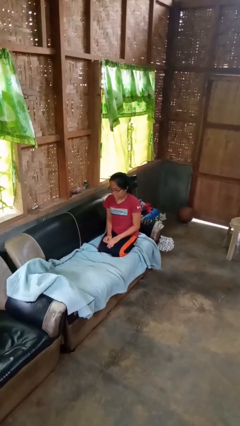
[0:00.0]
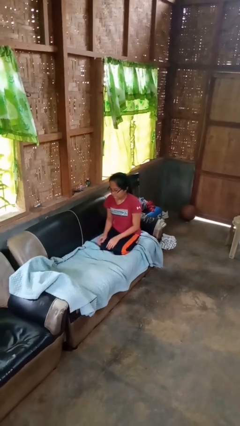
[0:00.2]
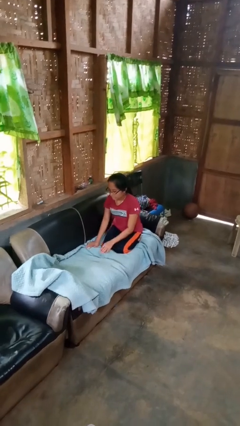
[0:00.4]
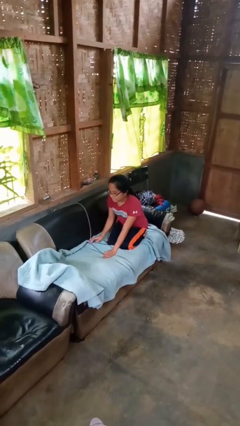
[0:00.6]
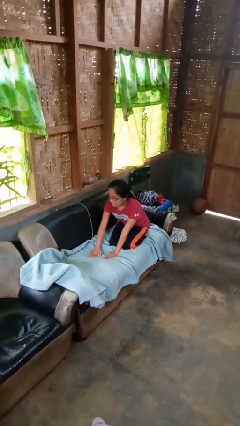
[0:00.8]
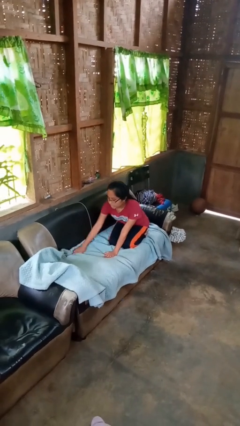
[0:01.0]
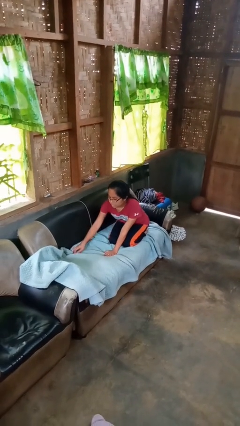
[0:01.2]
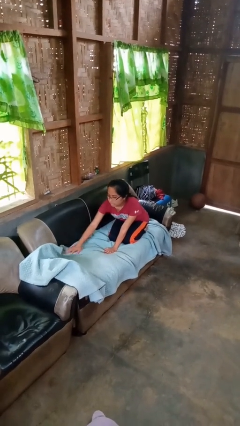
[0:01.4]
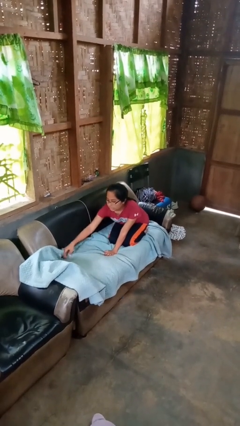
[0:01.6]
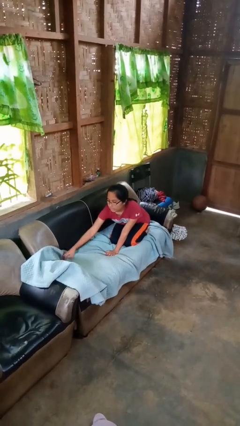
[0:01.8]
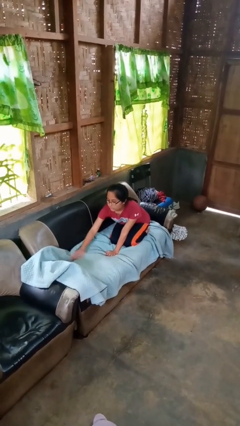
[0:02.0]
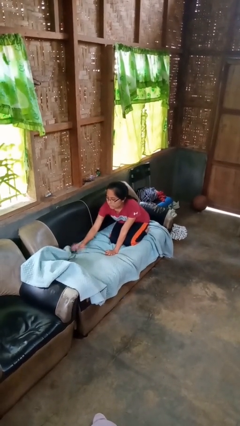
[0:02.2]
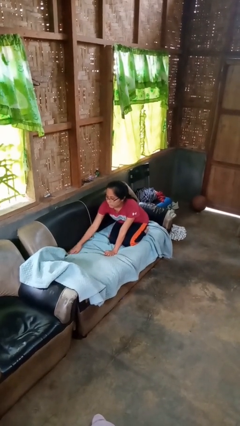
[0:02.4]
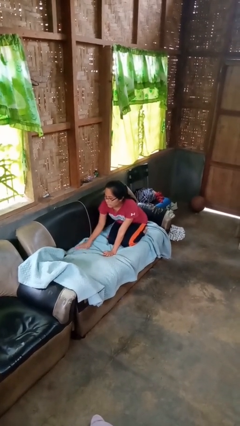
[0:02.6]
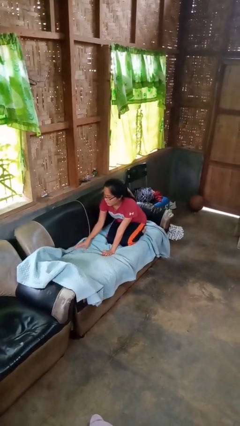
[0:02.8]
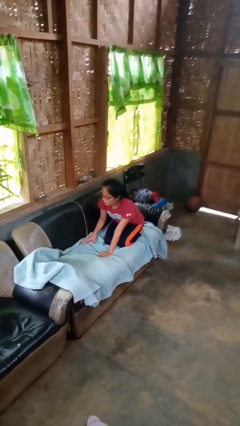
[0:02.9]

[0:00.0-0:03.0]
person searches in couch

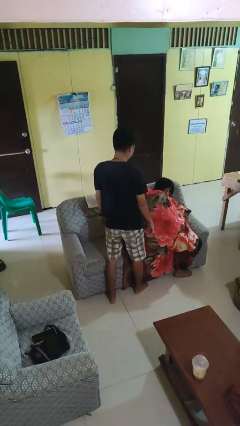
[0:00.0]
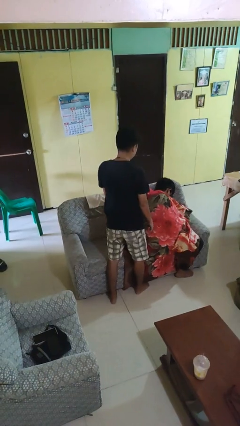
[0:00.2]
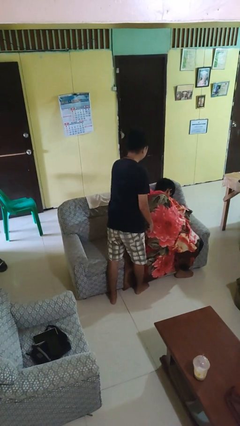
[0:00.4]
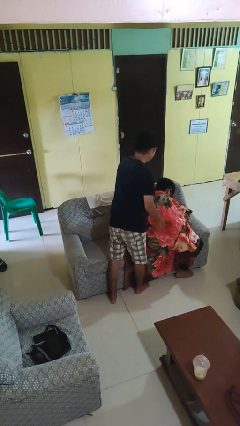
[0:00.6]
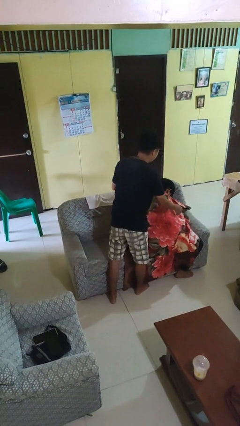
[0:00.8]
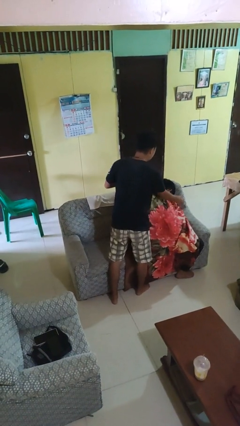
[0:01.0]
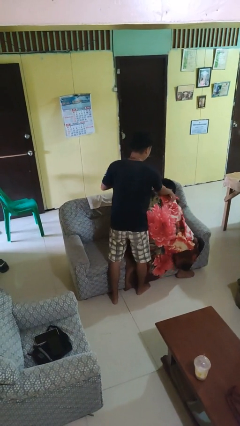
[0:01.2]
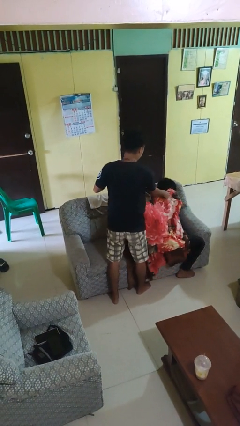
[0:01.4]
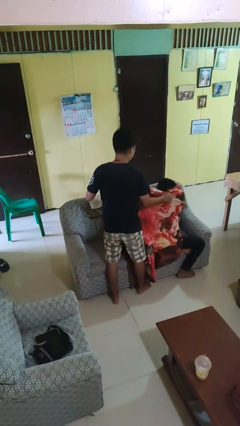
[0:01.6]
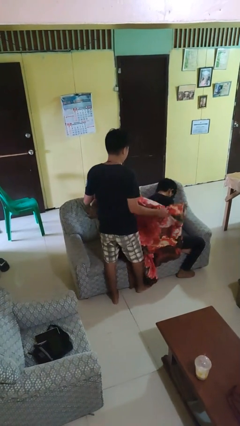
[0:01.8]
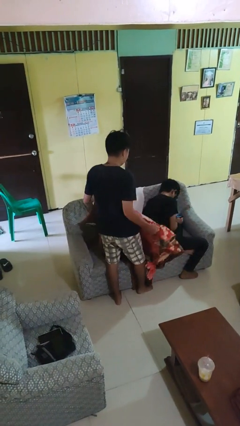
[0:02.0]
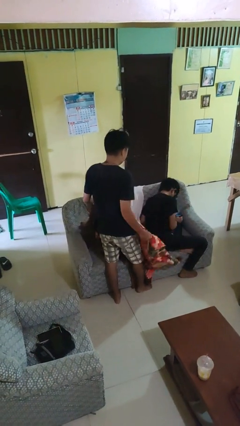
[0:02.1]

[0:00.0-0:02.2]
person uncovers friend with blanket

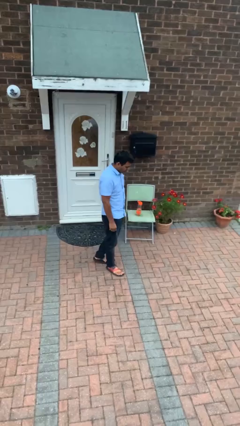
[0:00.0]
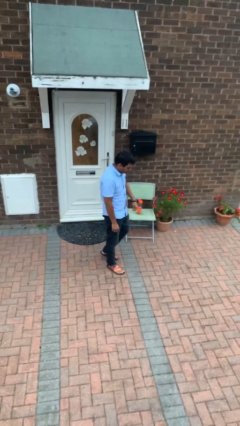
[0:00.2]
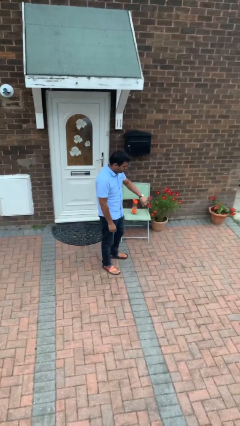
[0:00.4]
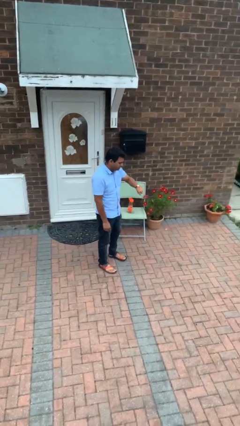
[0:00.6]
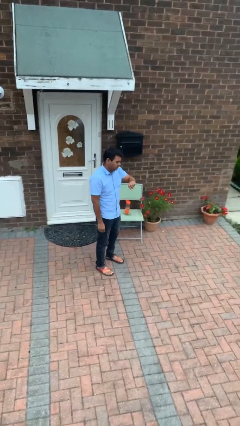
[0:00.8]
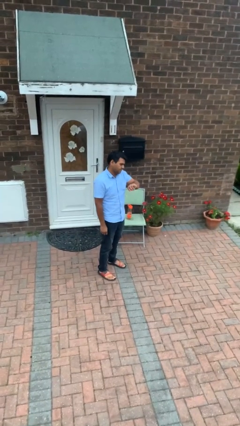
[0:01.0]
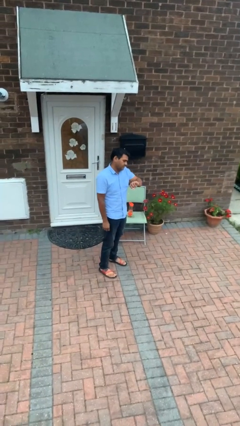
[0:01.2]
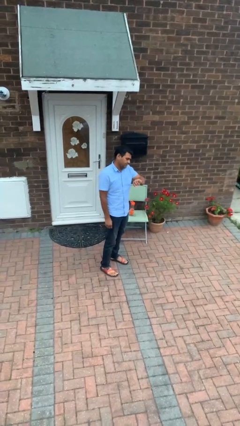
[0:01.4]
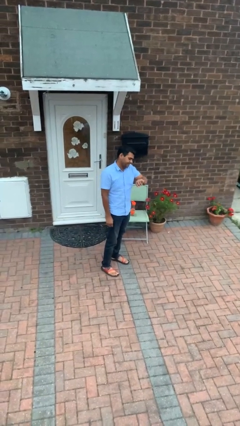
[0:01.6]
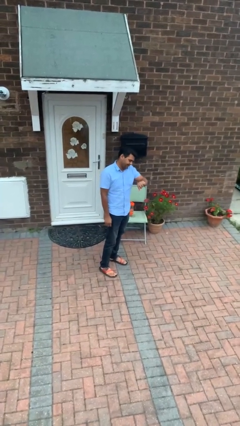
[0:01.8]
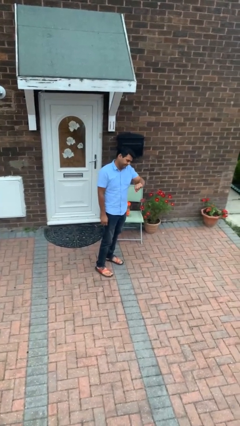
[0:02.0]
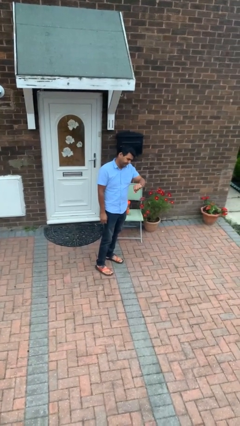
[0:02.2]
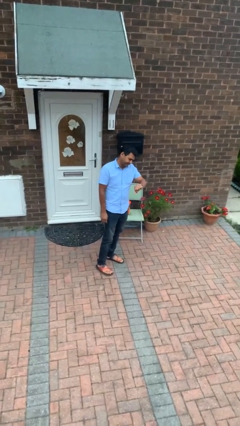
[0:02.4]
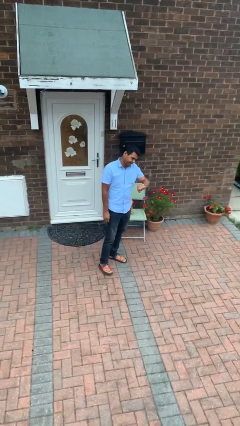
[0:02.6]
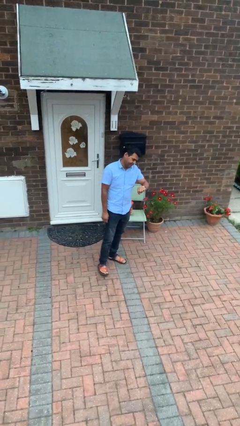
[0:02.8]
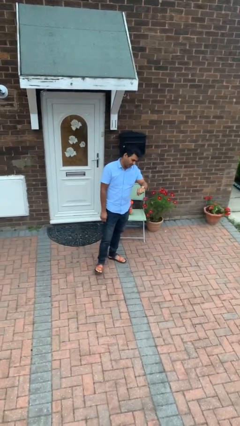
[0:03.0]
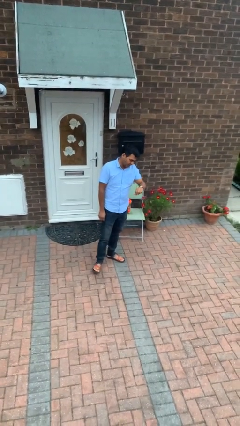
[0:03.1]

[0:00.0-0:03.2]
person looks at wristwatch

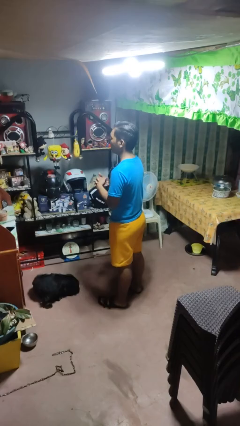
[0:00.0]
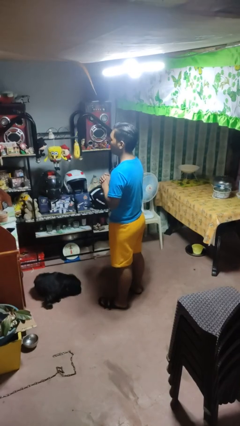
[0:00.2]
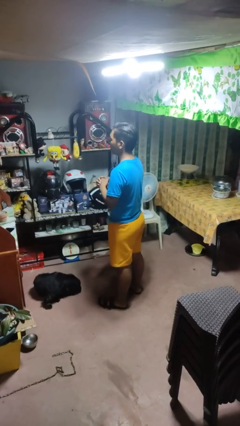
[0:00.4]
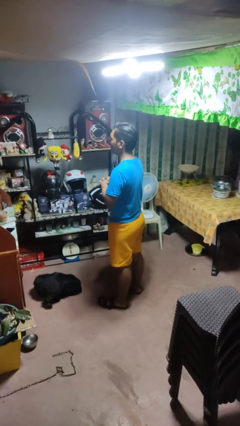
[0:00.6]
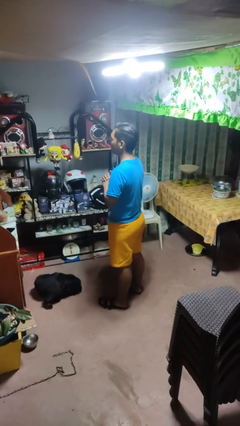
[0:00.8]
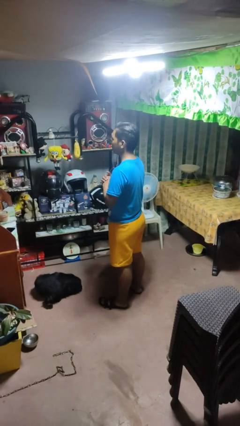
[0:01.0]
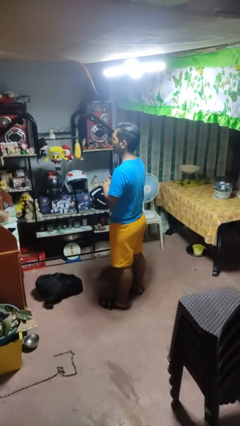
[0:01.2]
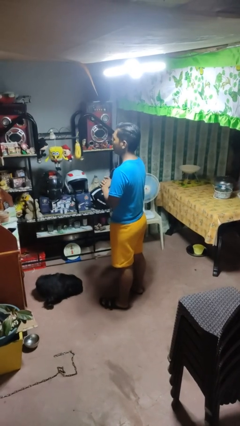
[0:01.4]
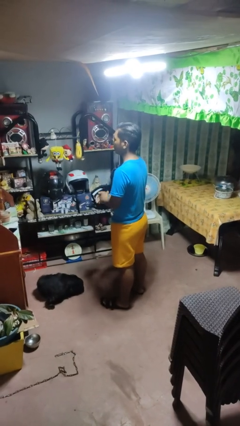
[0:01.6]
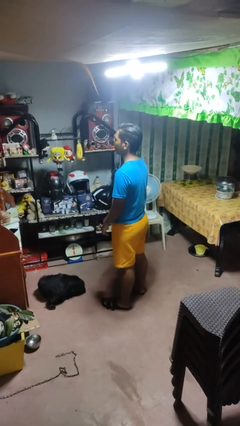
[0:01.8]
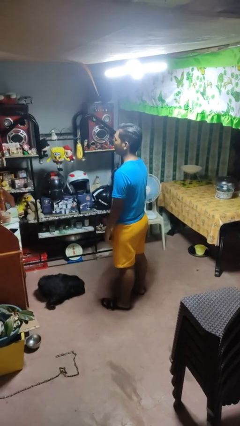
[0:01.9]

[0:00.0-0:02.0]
person cracks knuckles

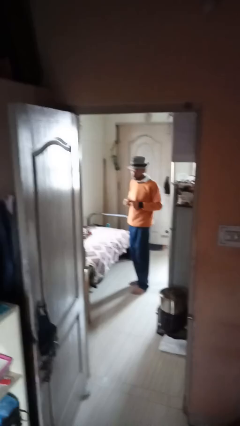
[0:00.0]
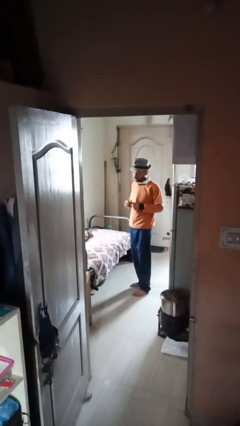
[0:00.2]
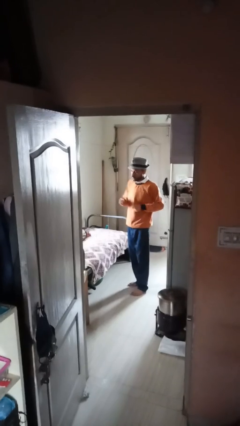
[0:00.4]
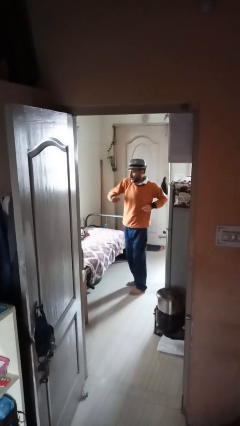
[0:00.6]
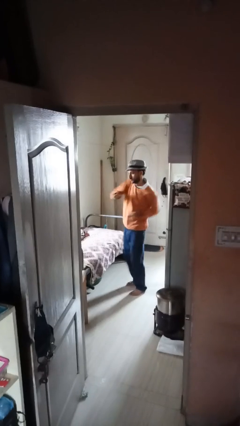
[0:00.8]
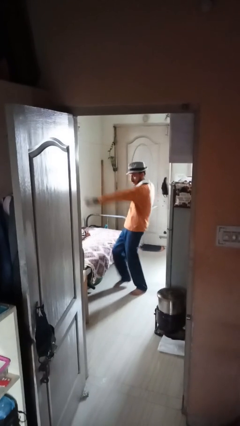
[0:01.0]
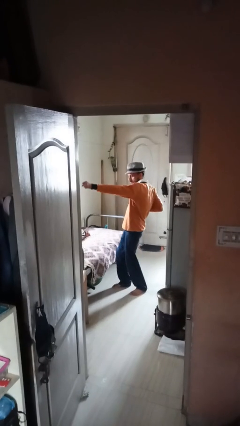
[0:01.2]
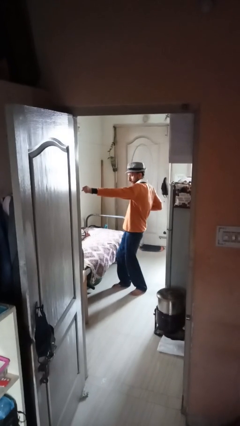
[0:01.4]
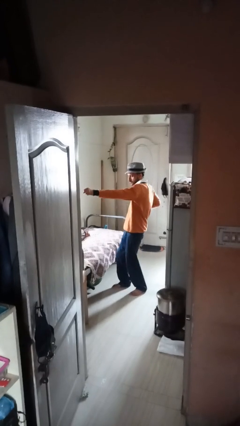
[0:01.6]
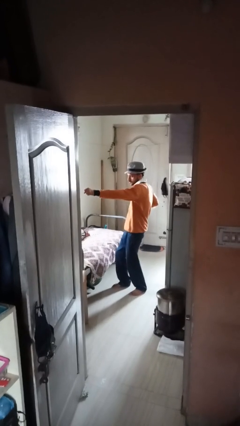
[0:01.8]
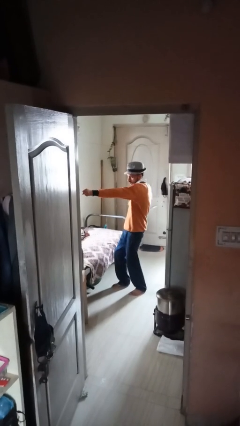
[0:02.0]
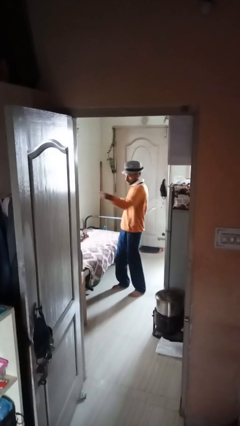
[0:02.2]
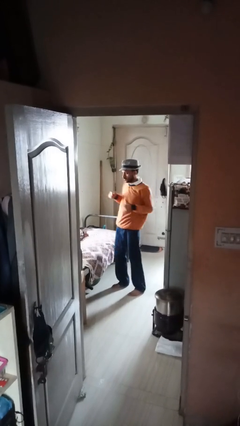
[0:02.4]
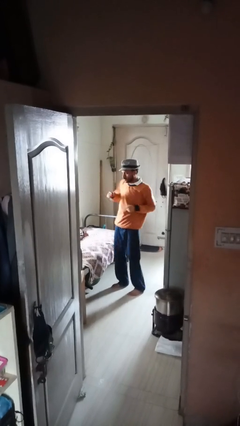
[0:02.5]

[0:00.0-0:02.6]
person punches

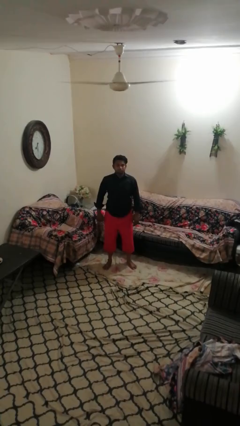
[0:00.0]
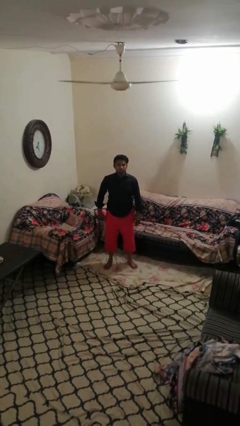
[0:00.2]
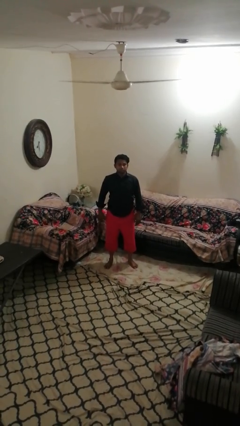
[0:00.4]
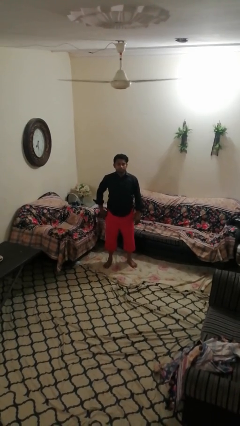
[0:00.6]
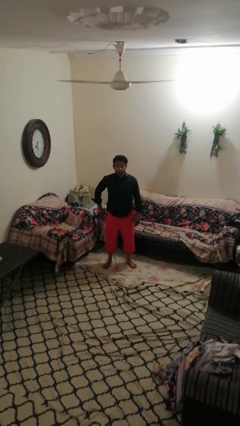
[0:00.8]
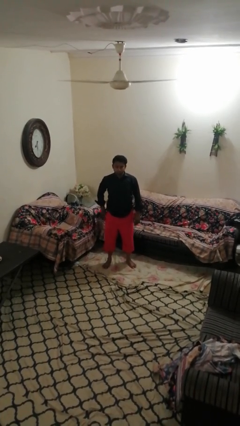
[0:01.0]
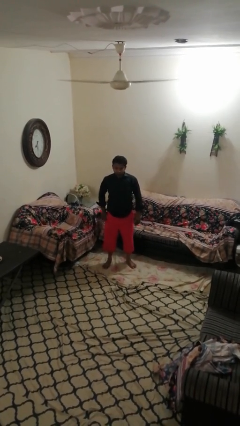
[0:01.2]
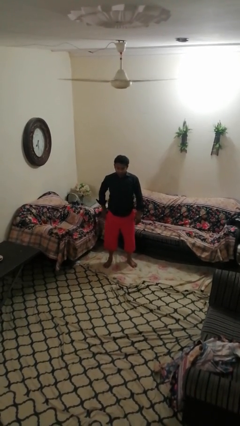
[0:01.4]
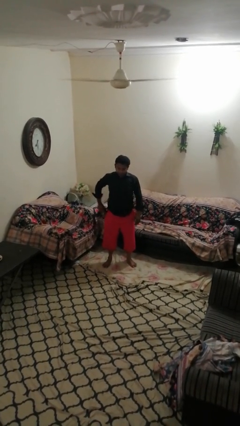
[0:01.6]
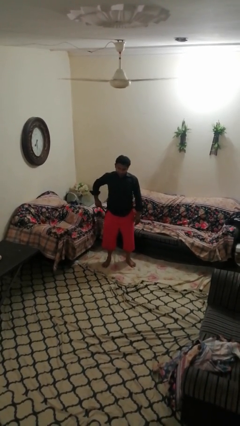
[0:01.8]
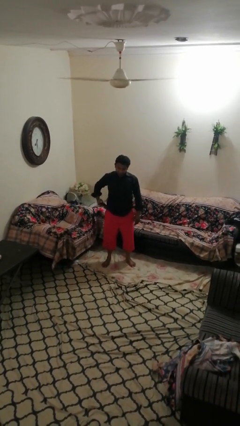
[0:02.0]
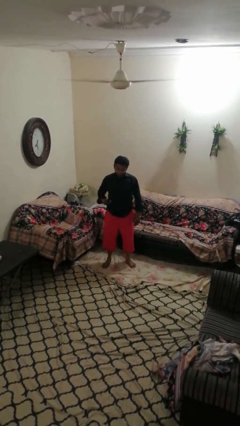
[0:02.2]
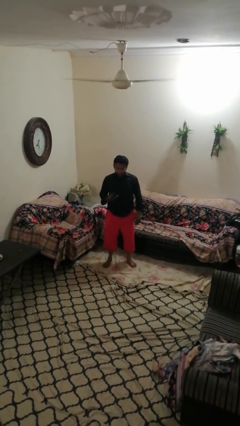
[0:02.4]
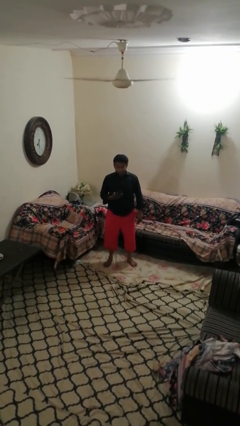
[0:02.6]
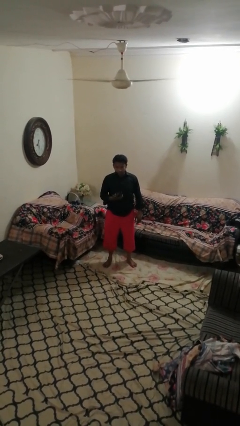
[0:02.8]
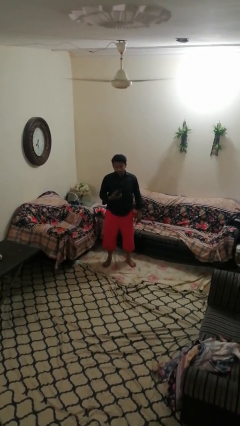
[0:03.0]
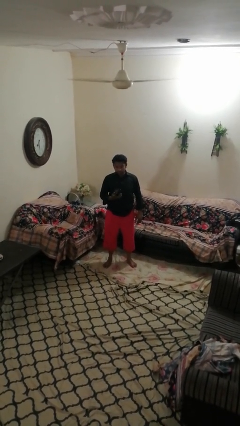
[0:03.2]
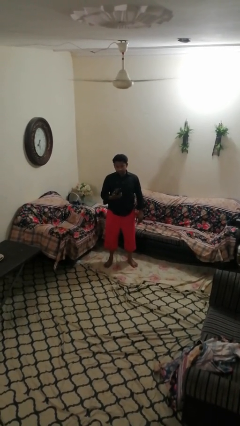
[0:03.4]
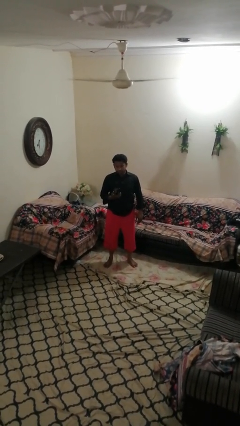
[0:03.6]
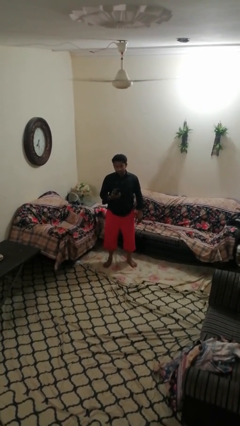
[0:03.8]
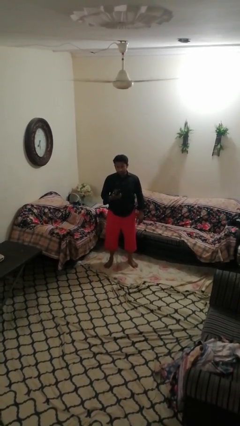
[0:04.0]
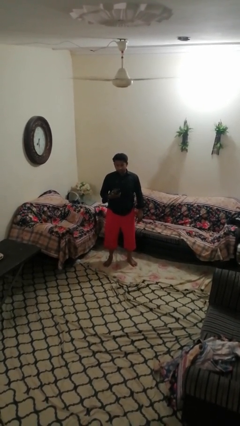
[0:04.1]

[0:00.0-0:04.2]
person takes phone from pocket

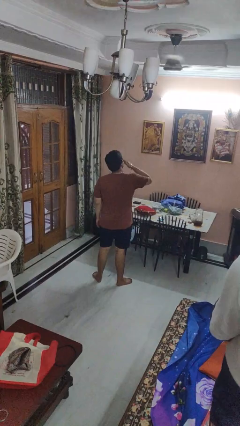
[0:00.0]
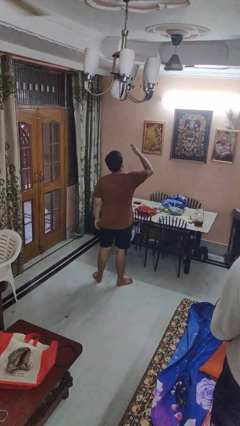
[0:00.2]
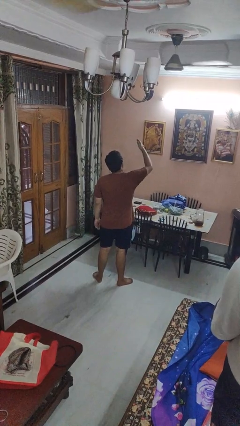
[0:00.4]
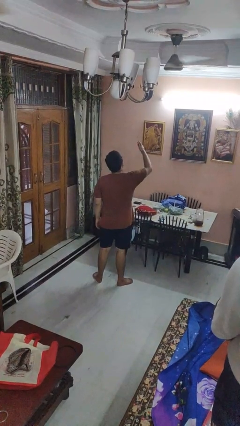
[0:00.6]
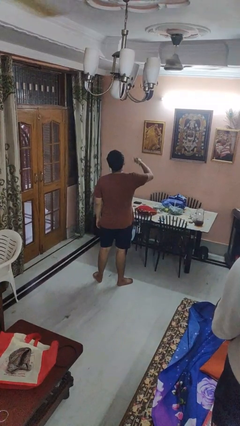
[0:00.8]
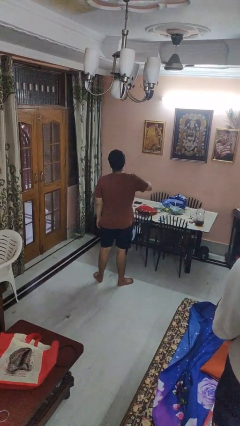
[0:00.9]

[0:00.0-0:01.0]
person gestures blow kiss
